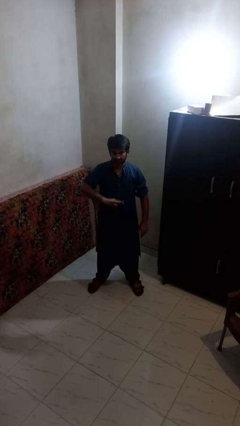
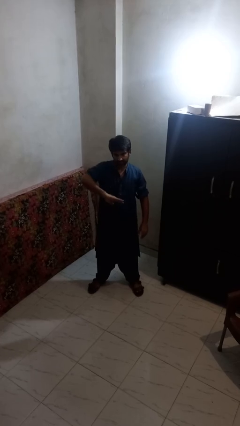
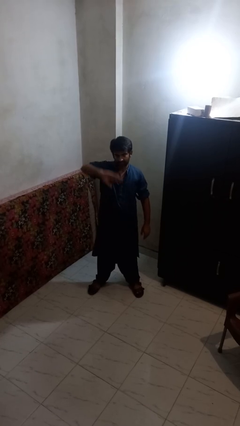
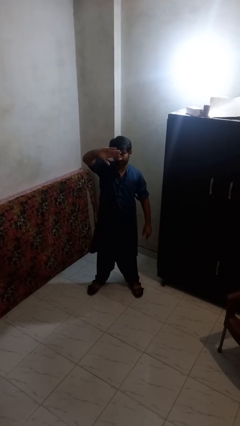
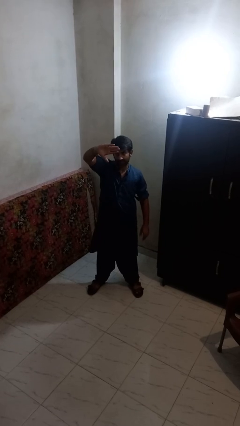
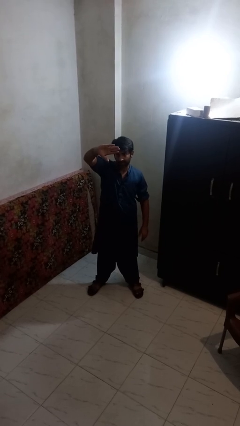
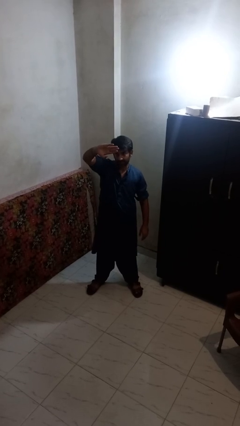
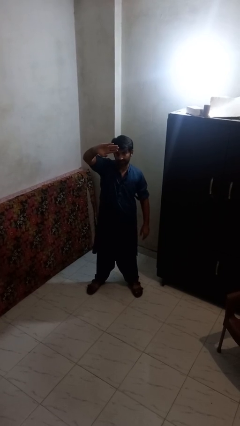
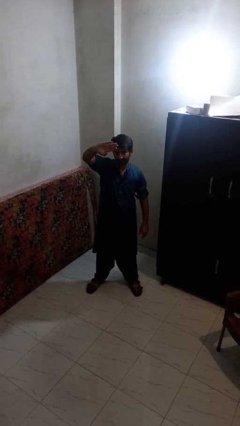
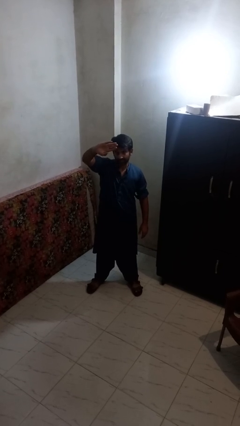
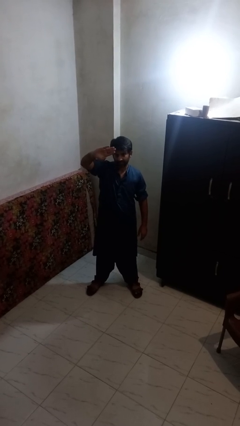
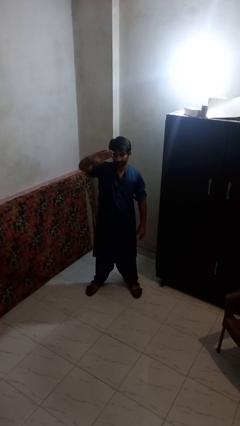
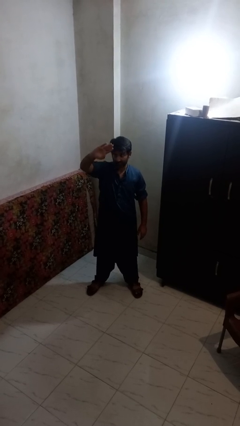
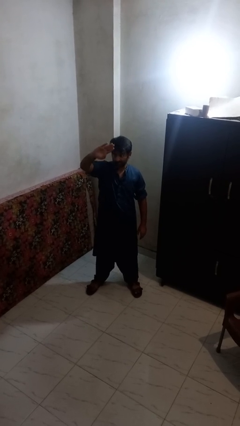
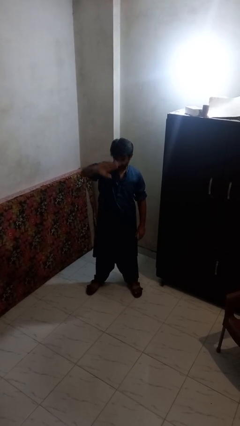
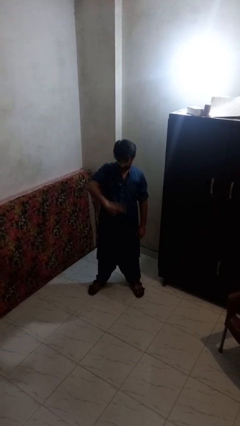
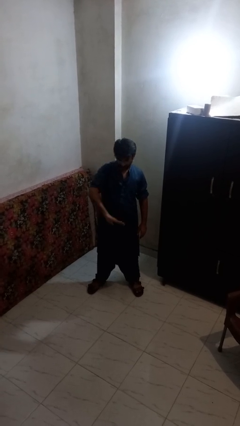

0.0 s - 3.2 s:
person gestures swipe up

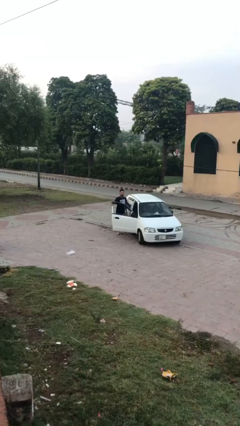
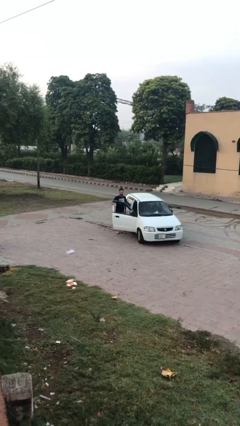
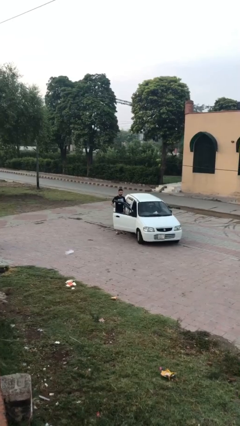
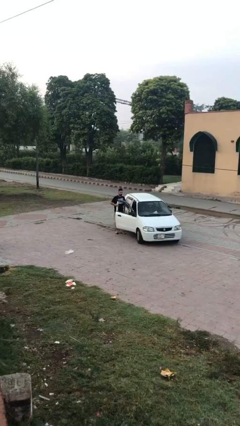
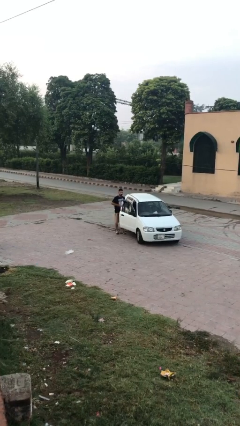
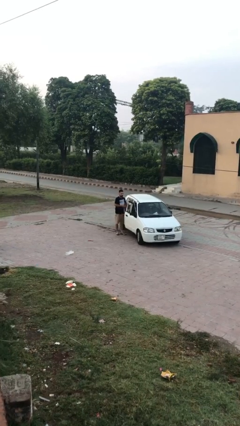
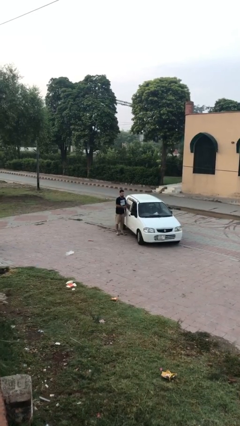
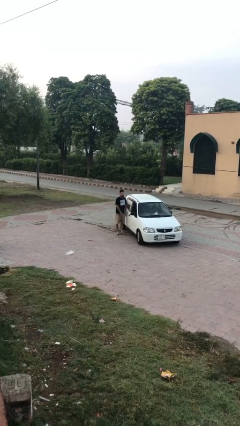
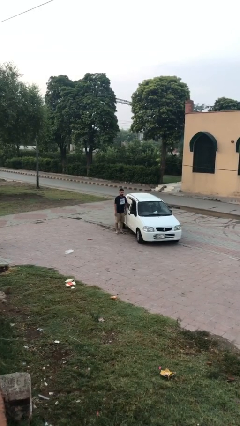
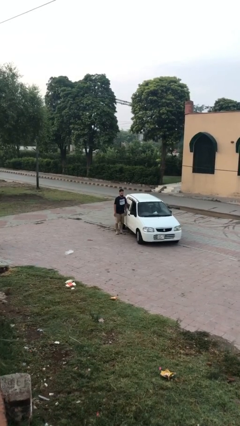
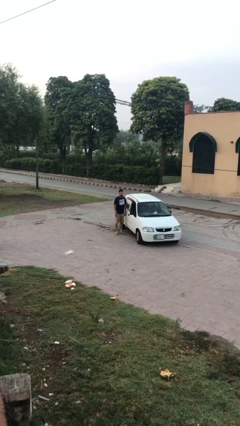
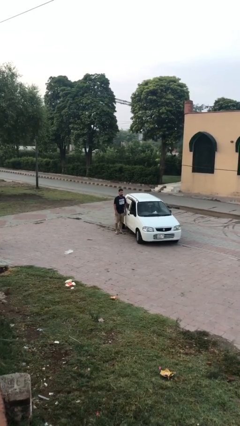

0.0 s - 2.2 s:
person closes car door

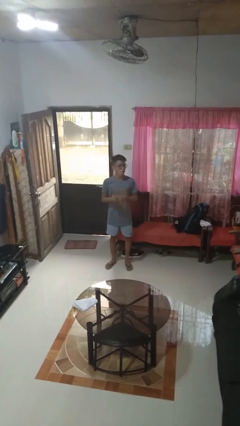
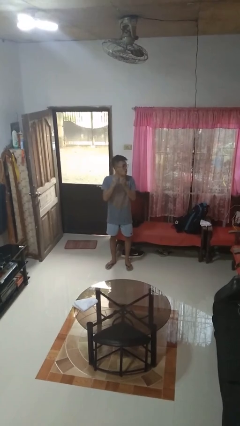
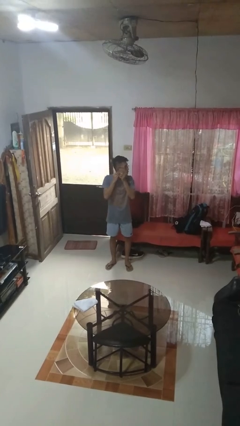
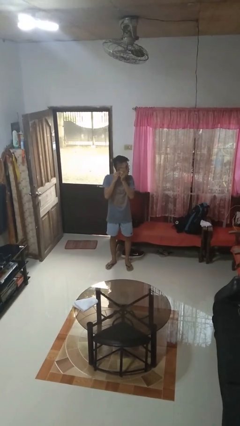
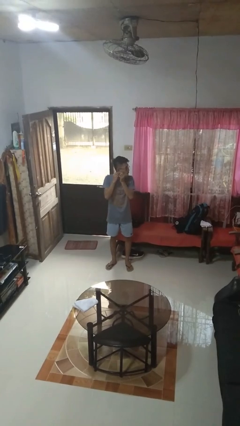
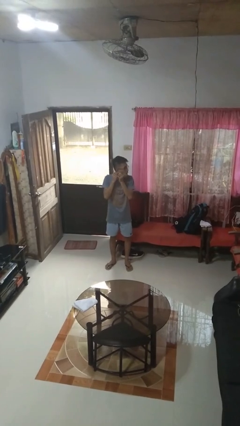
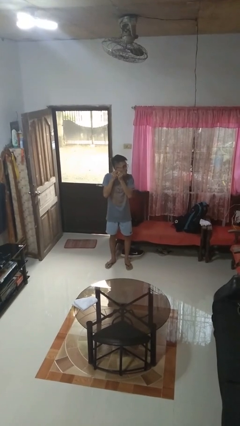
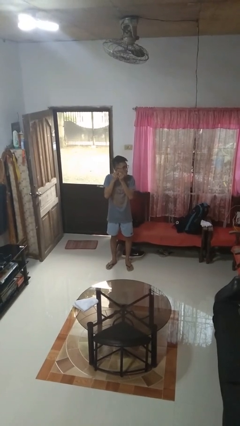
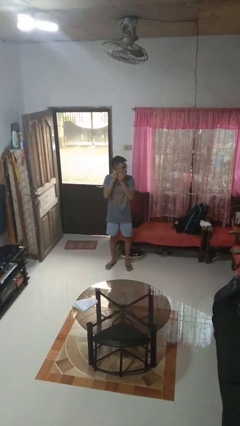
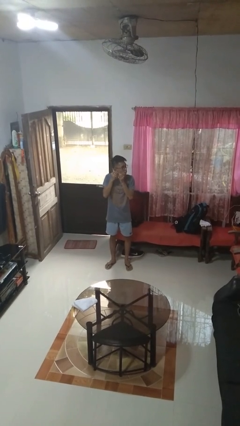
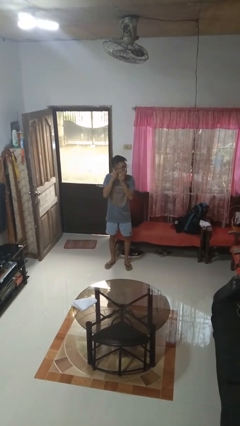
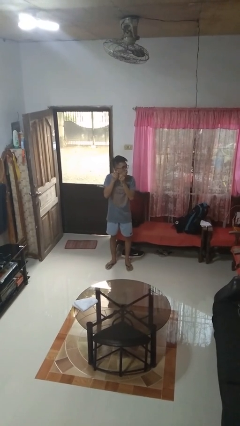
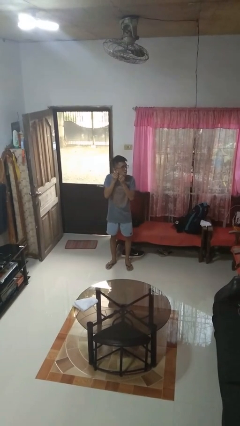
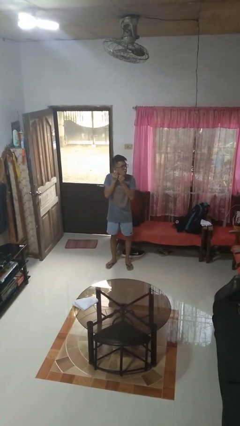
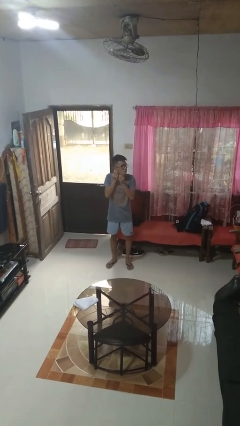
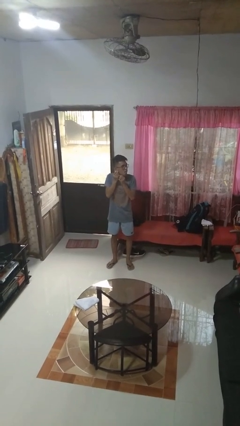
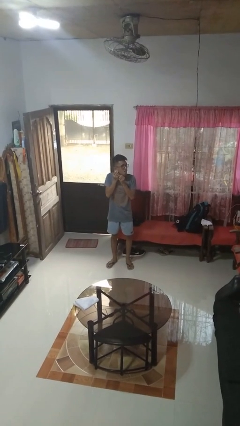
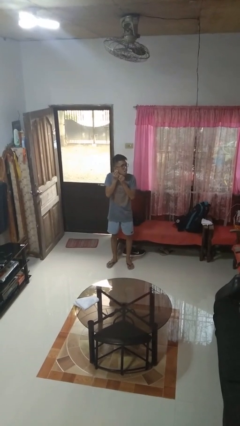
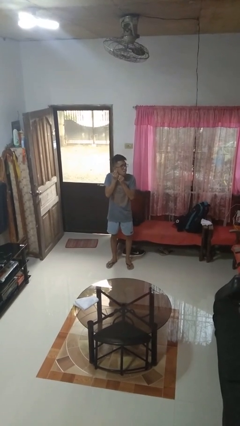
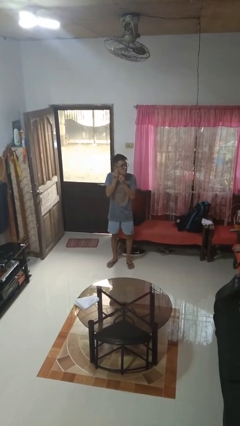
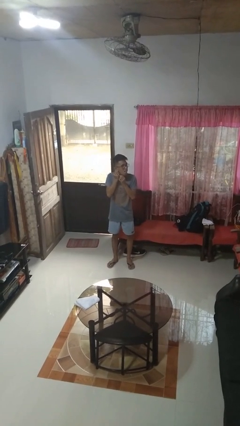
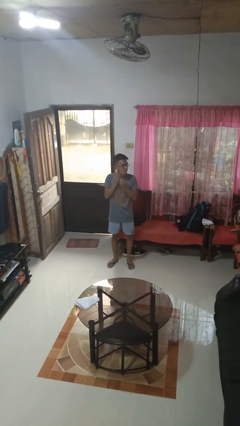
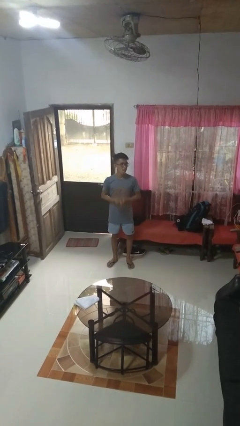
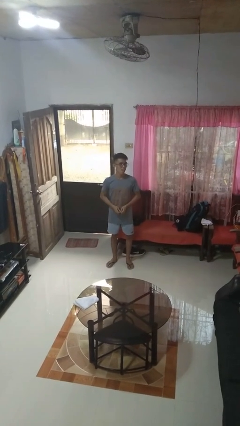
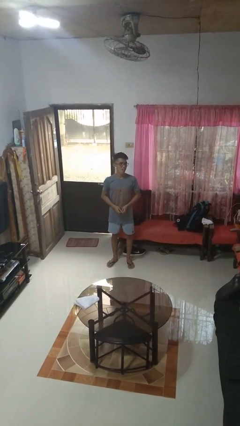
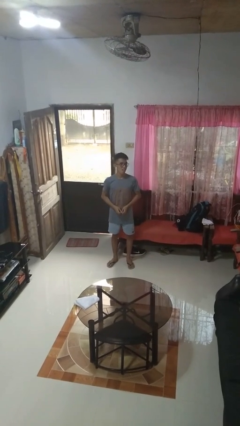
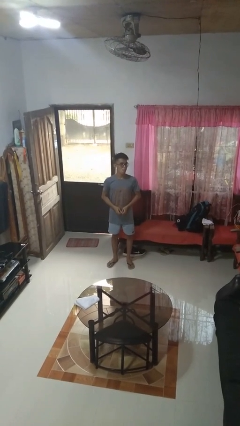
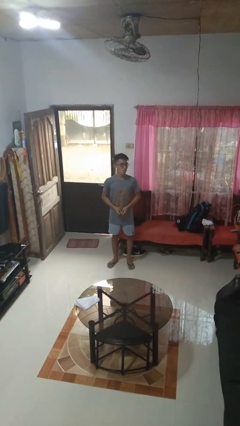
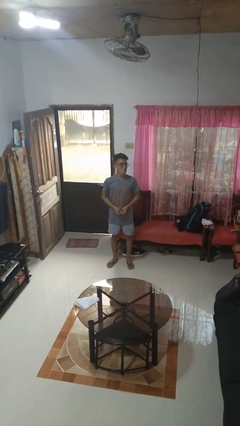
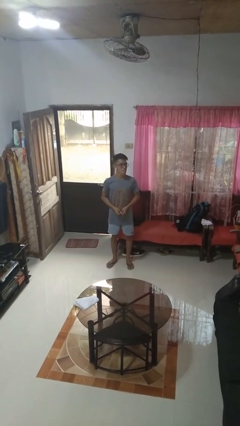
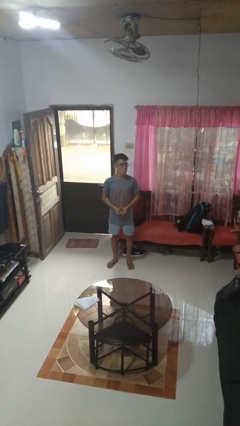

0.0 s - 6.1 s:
person puts on earrings

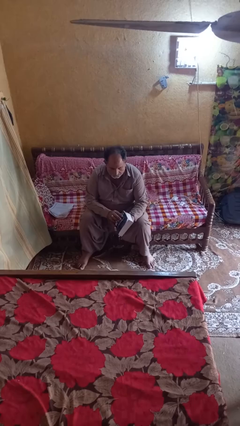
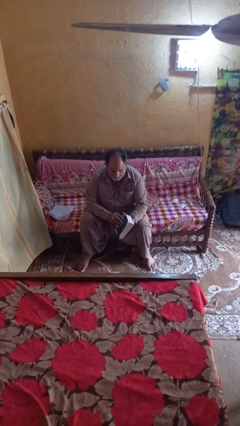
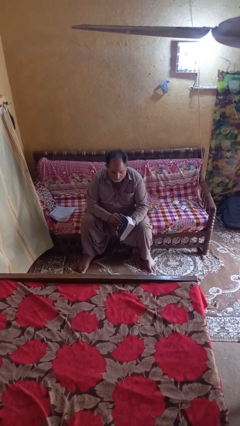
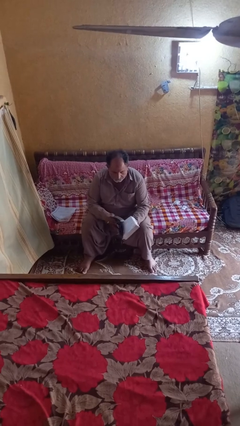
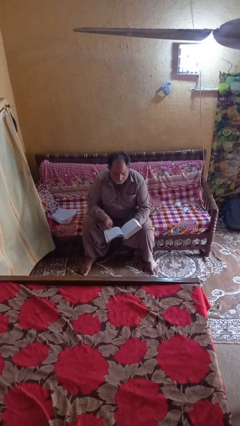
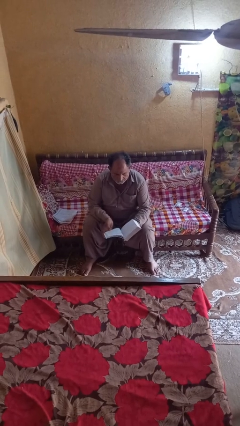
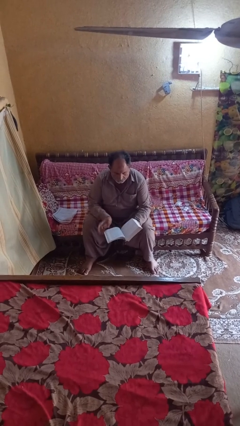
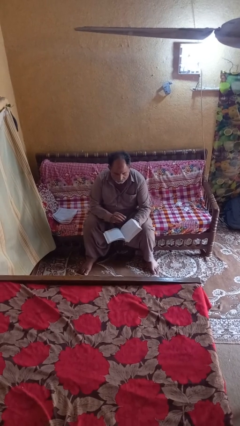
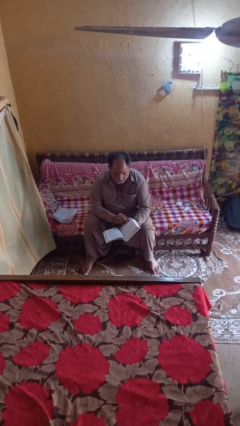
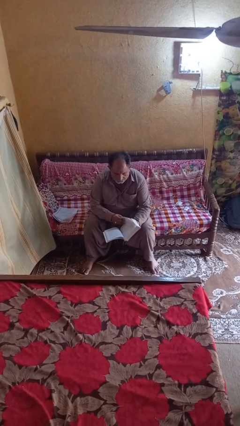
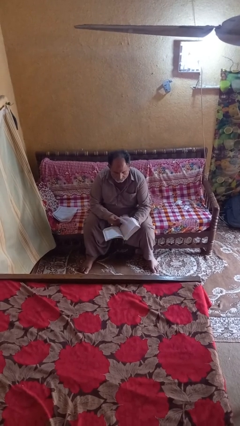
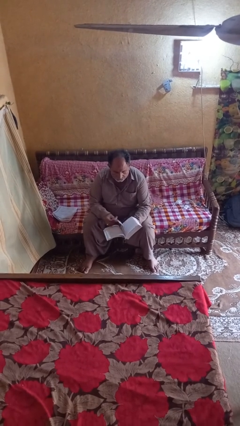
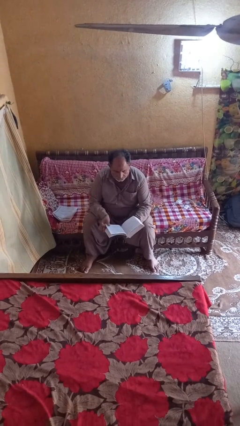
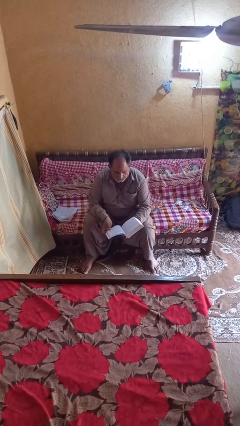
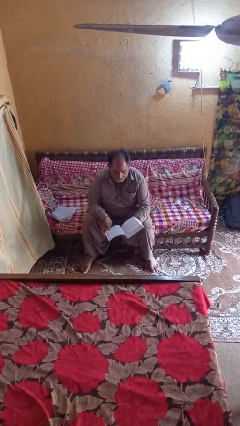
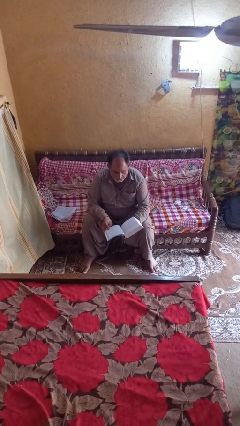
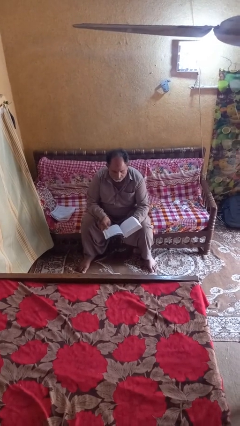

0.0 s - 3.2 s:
person reads book

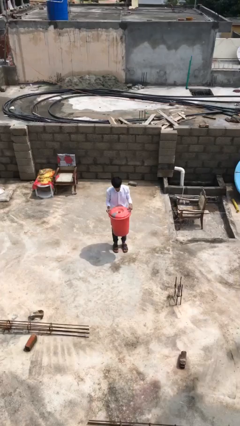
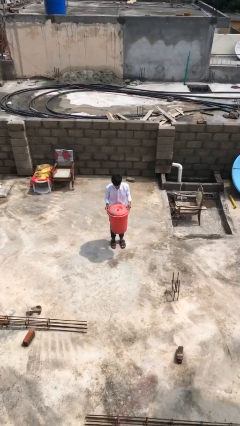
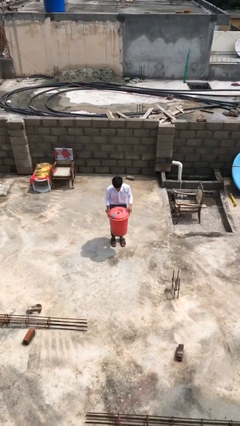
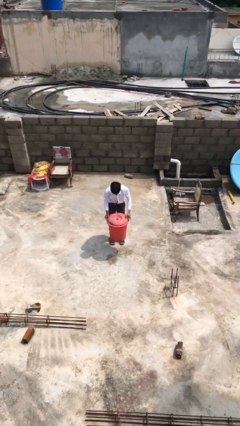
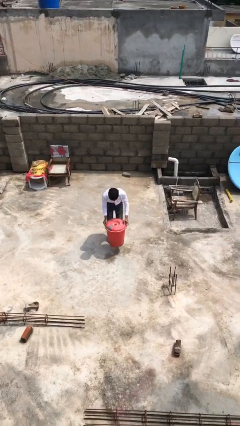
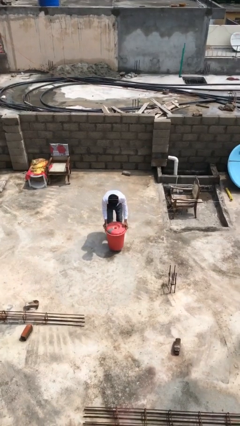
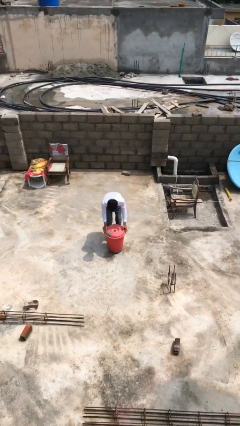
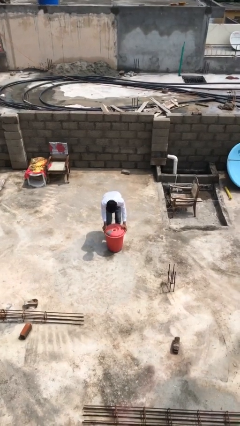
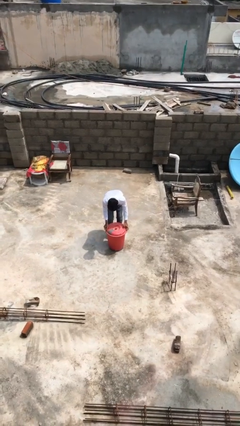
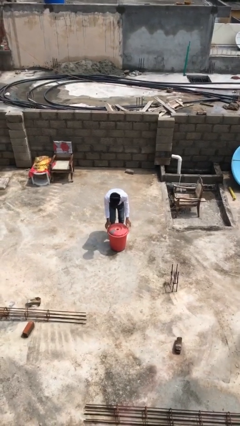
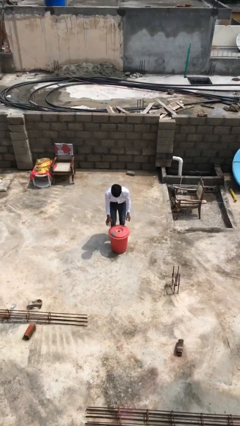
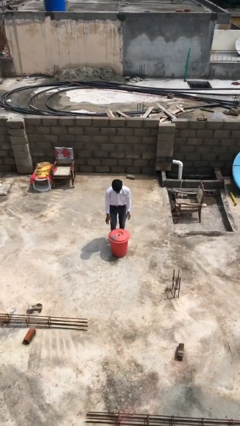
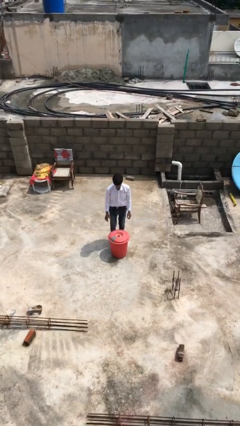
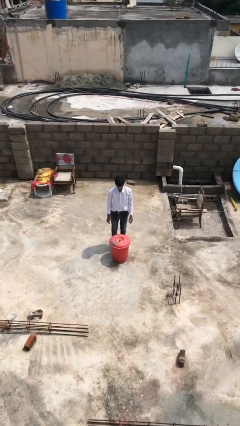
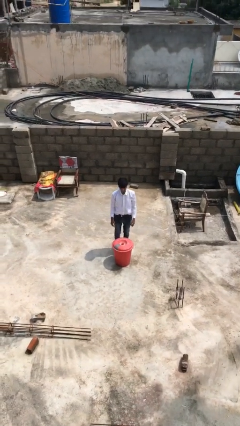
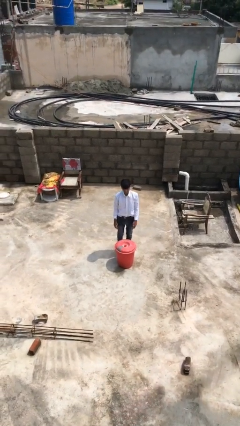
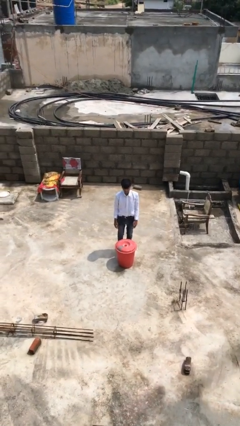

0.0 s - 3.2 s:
person puts down object on floor
